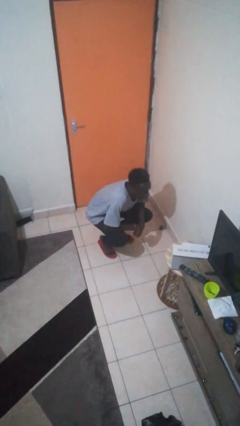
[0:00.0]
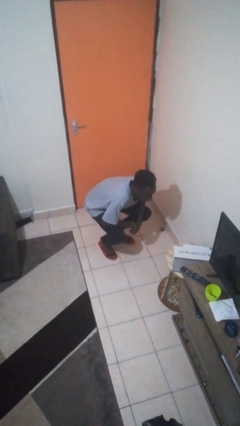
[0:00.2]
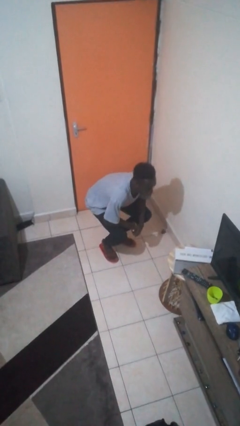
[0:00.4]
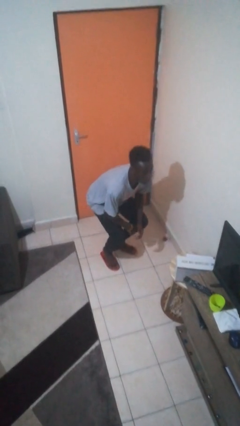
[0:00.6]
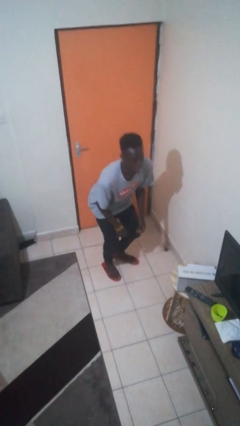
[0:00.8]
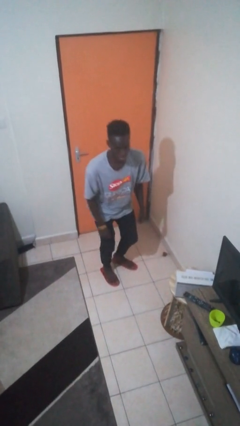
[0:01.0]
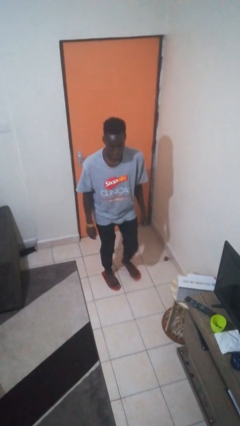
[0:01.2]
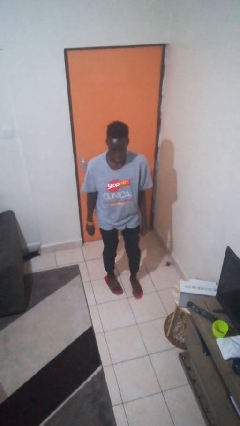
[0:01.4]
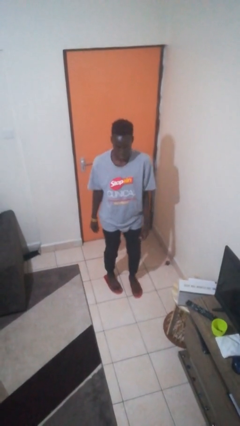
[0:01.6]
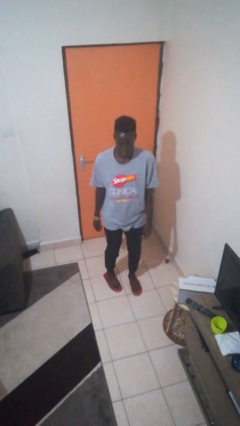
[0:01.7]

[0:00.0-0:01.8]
person stands up

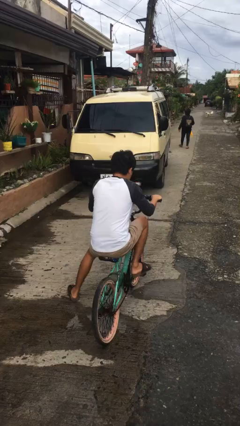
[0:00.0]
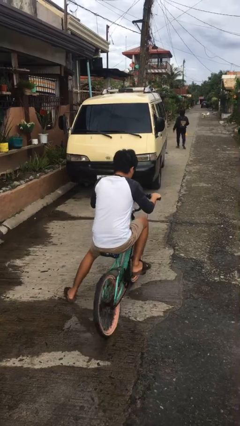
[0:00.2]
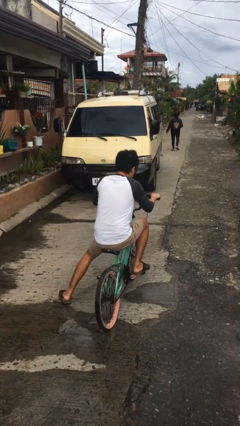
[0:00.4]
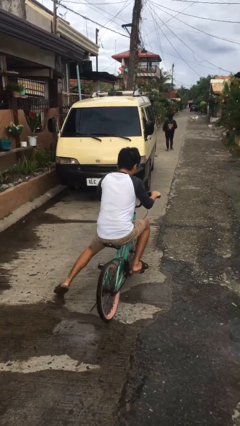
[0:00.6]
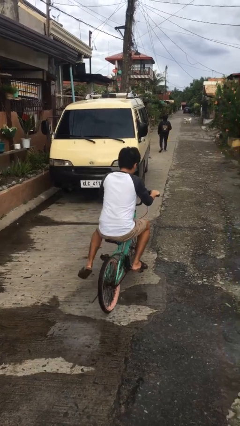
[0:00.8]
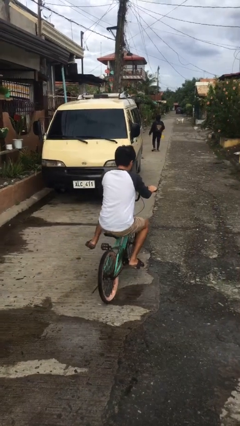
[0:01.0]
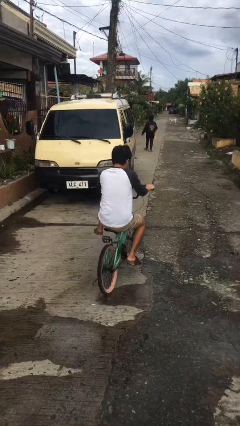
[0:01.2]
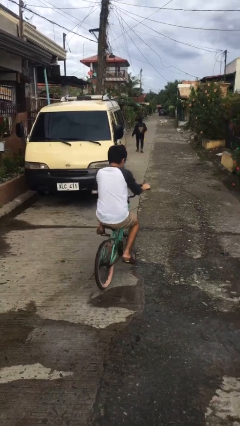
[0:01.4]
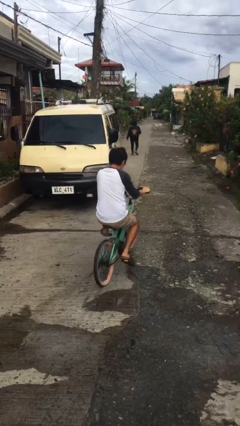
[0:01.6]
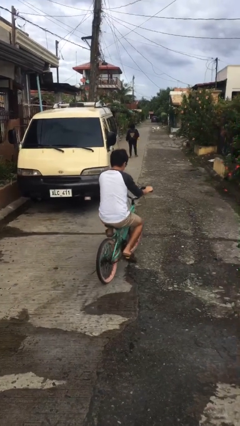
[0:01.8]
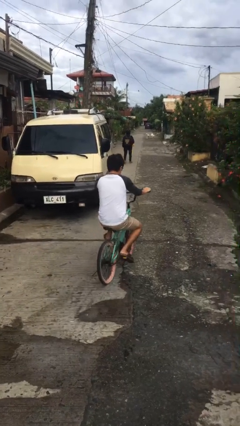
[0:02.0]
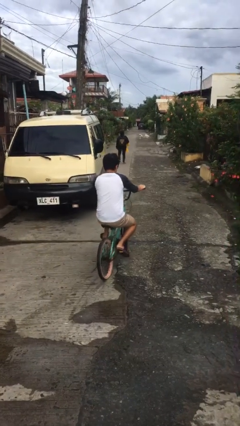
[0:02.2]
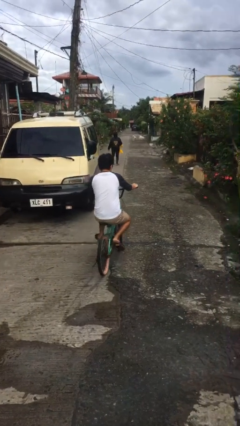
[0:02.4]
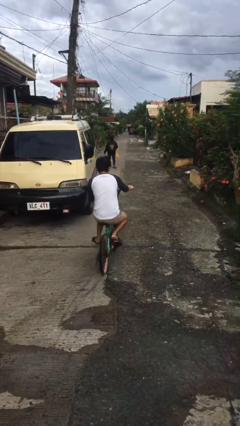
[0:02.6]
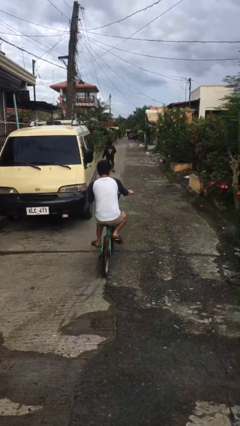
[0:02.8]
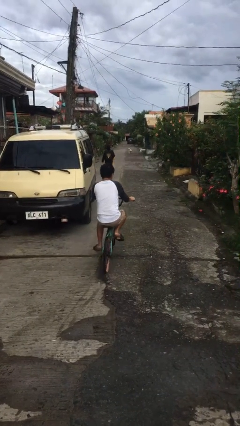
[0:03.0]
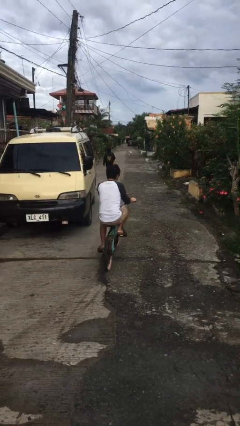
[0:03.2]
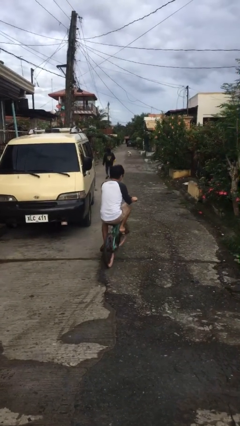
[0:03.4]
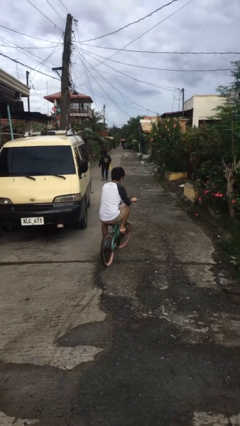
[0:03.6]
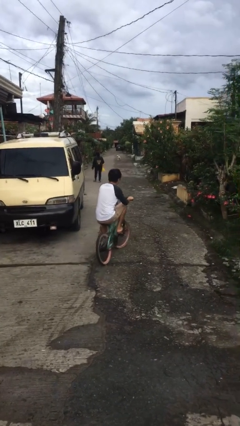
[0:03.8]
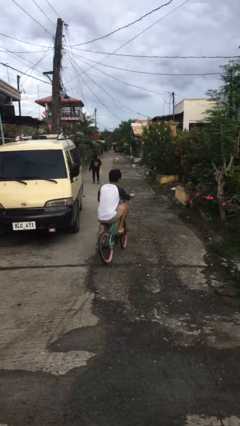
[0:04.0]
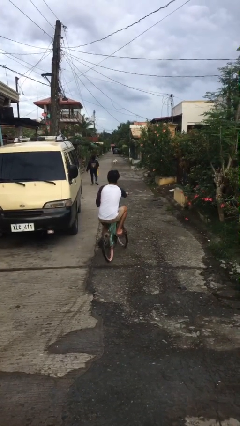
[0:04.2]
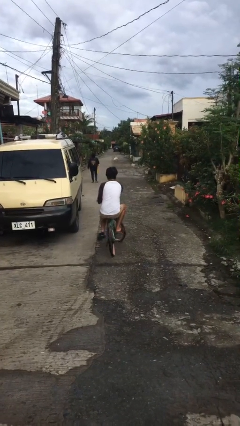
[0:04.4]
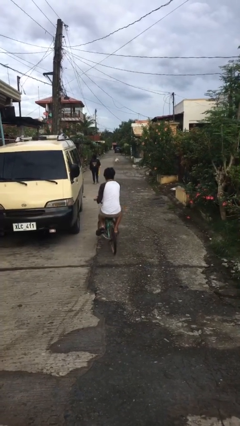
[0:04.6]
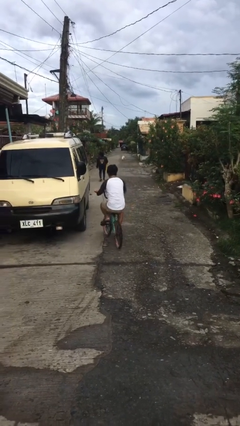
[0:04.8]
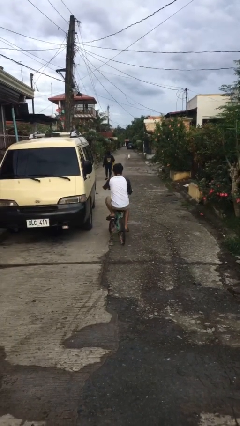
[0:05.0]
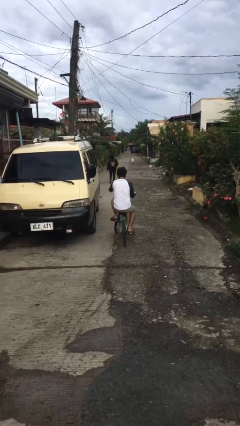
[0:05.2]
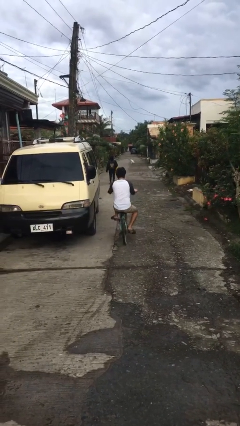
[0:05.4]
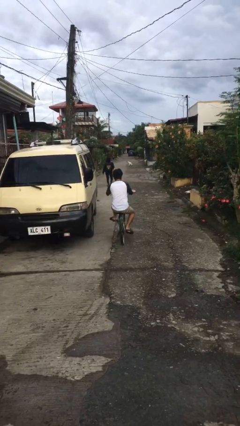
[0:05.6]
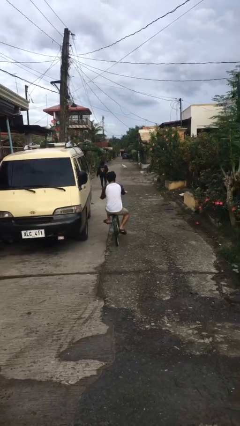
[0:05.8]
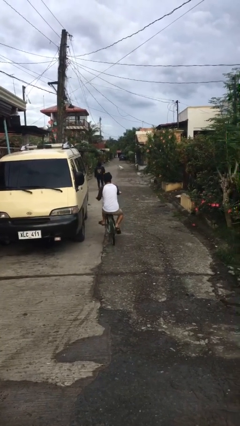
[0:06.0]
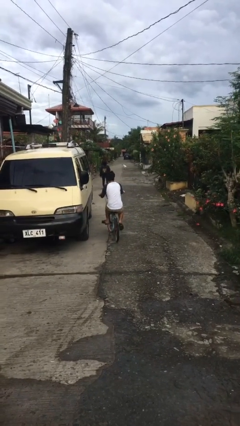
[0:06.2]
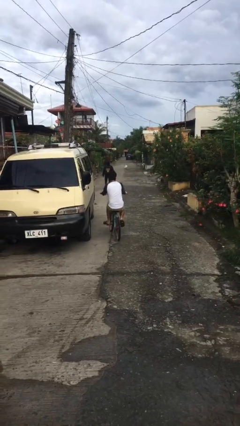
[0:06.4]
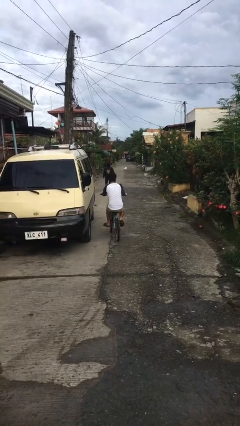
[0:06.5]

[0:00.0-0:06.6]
person rides bicycle

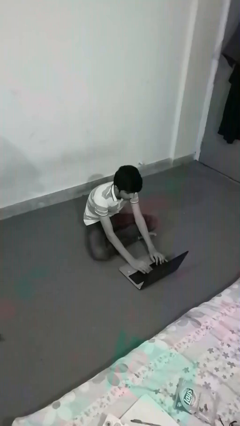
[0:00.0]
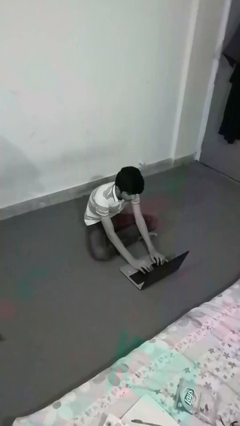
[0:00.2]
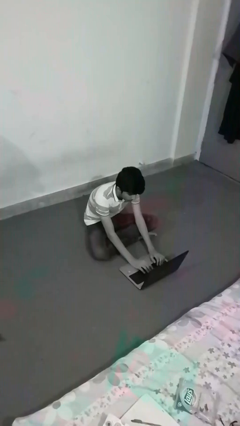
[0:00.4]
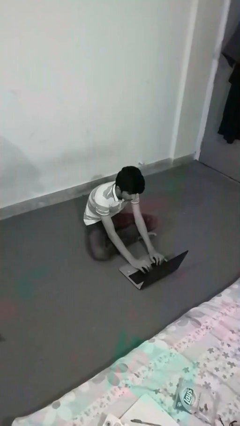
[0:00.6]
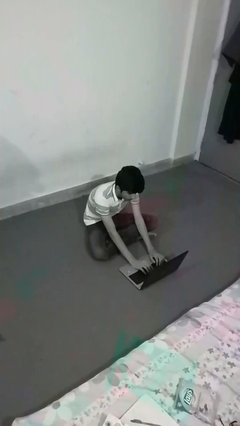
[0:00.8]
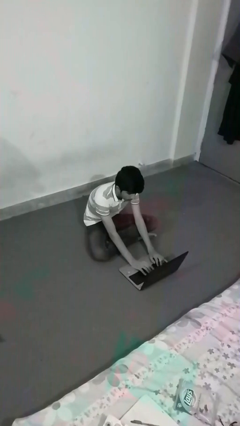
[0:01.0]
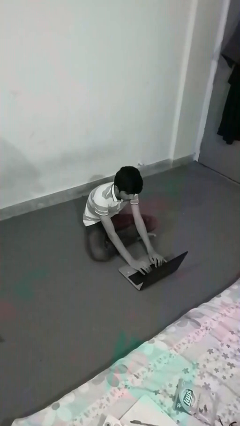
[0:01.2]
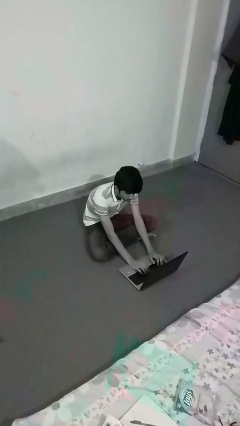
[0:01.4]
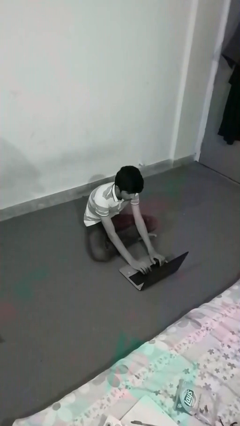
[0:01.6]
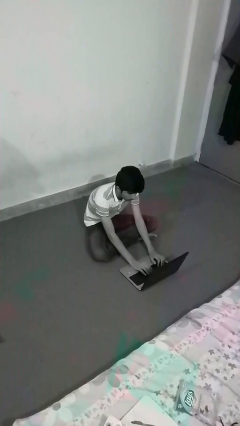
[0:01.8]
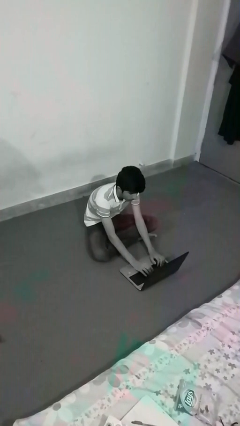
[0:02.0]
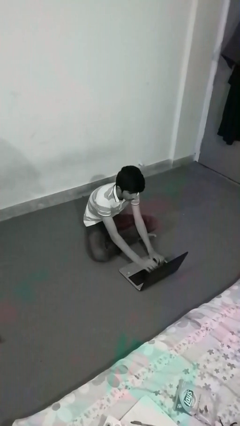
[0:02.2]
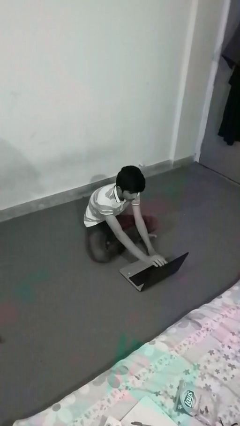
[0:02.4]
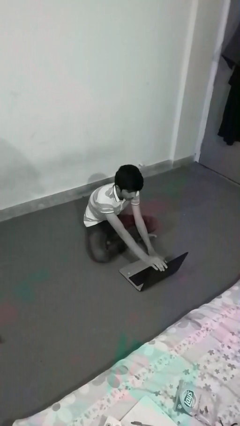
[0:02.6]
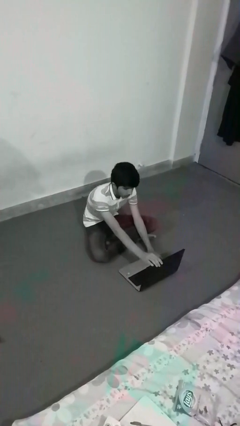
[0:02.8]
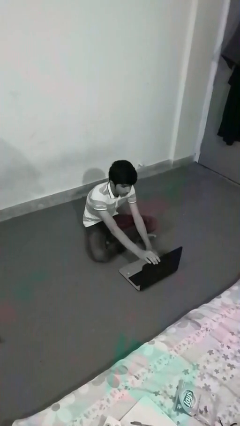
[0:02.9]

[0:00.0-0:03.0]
person interacts with laptop

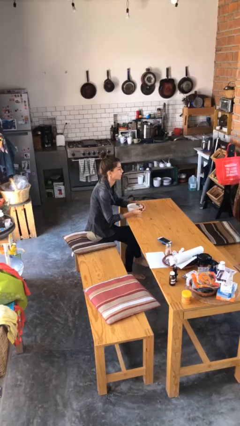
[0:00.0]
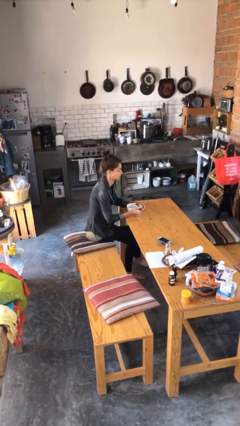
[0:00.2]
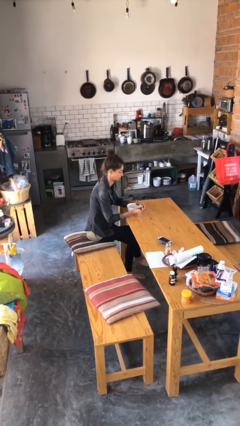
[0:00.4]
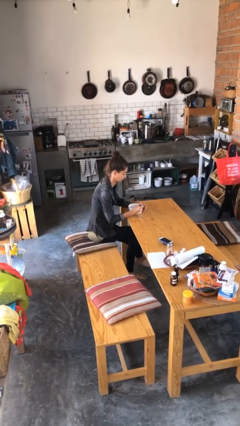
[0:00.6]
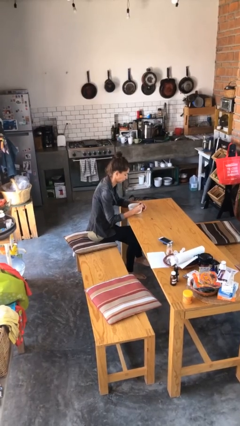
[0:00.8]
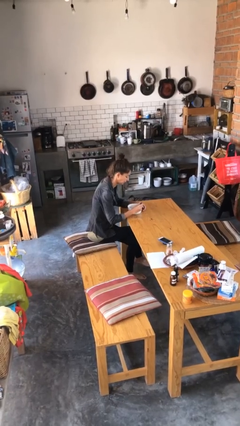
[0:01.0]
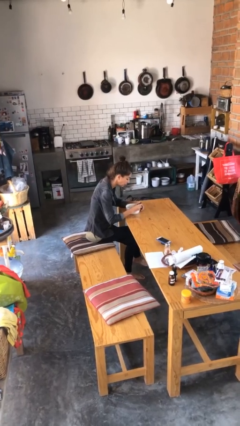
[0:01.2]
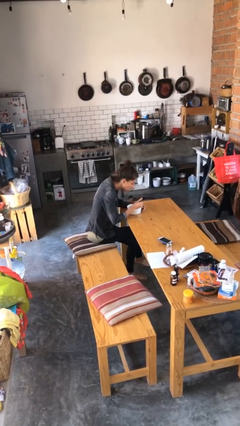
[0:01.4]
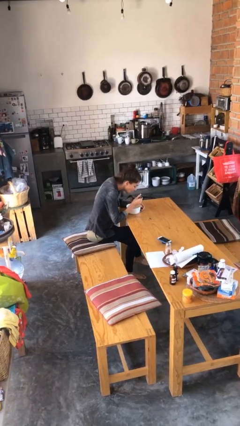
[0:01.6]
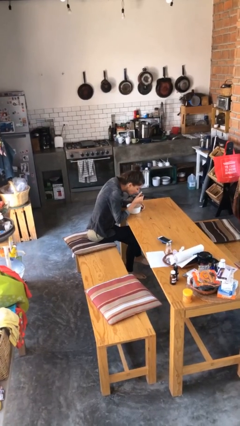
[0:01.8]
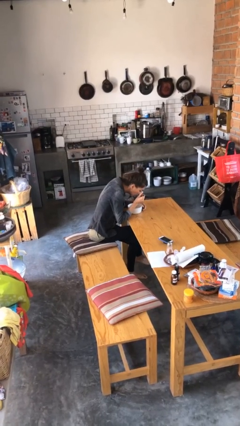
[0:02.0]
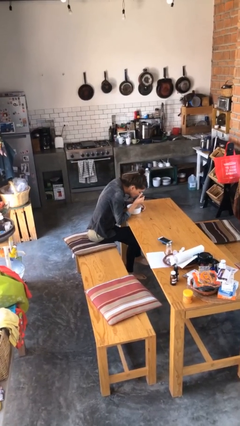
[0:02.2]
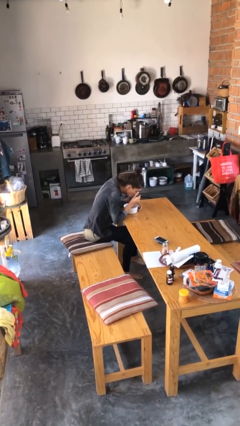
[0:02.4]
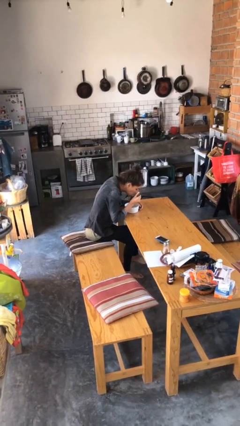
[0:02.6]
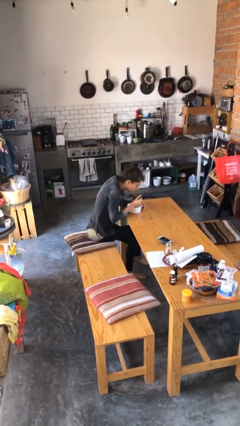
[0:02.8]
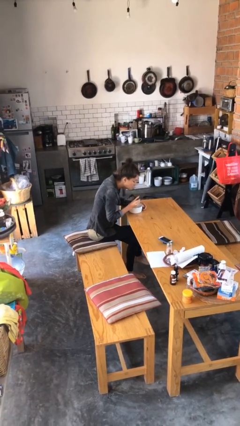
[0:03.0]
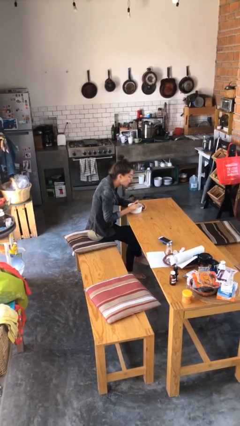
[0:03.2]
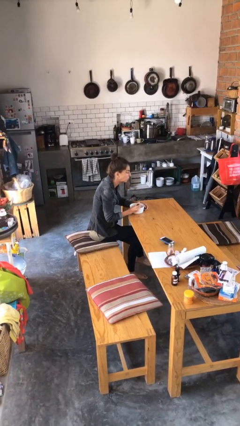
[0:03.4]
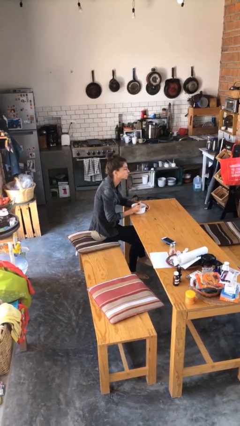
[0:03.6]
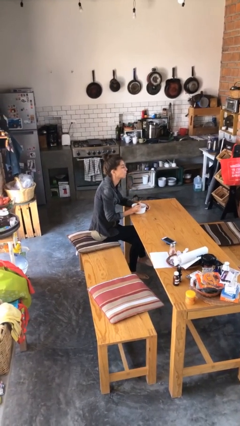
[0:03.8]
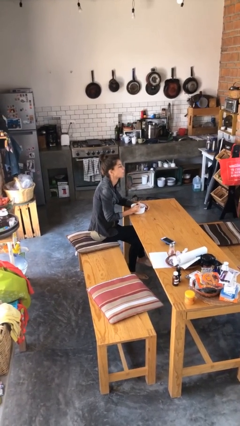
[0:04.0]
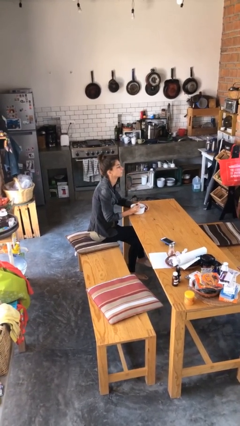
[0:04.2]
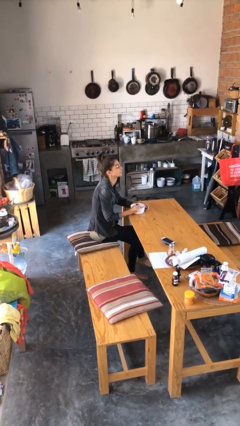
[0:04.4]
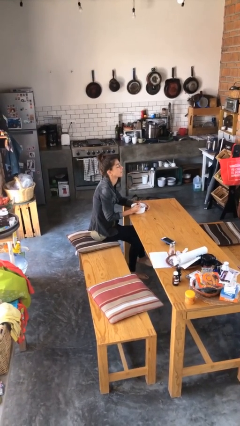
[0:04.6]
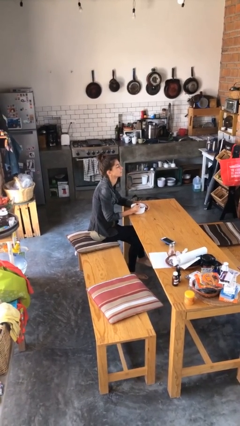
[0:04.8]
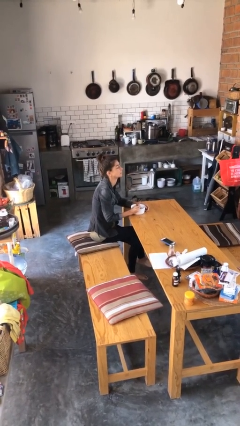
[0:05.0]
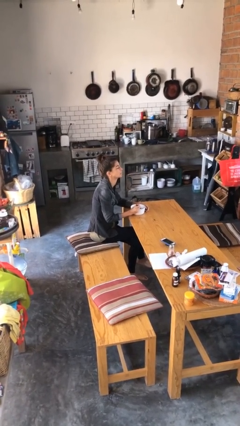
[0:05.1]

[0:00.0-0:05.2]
person eats with utensil

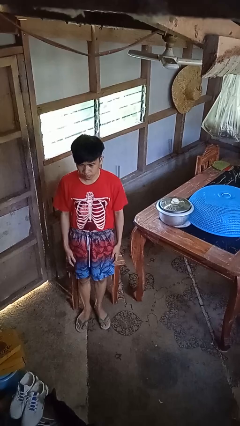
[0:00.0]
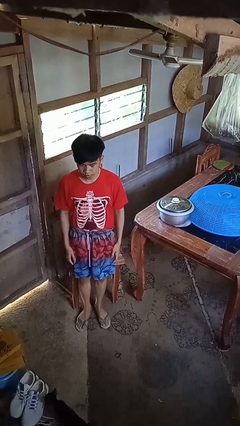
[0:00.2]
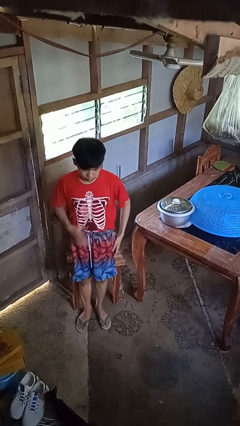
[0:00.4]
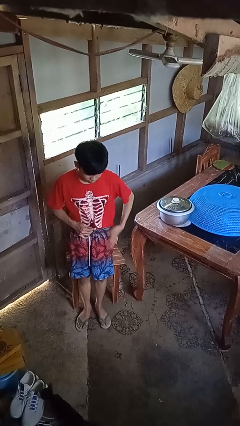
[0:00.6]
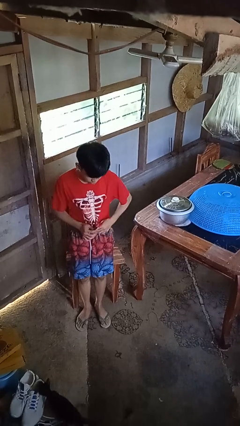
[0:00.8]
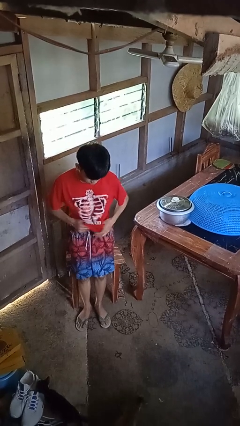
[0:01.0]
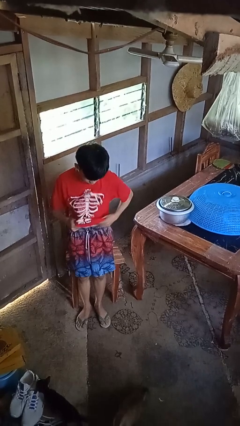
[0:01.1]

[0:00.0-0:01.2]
person untucks shirt
